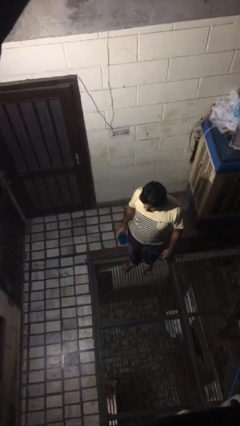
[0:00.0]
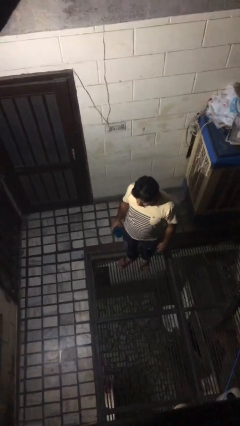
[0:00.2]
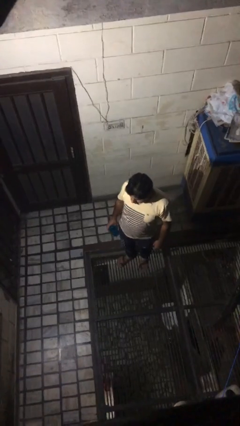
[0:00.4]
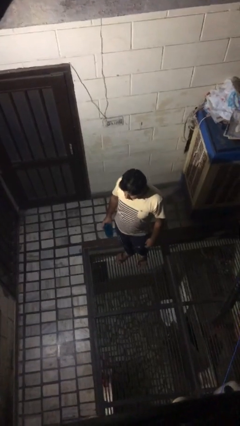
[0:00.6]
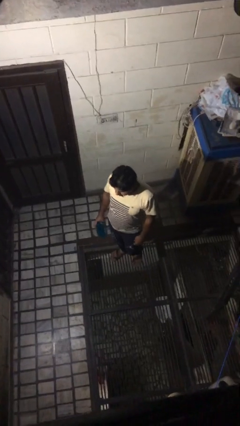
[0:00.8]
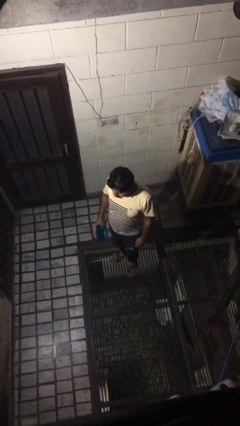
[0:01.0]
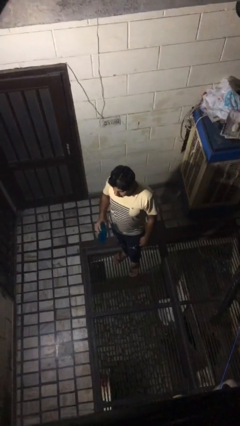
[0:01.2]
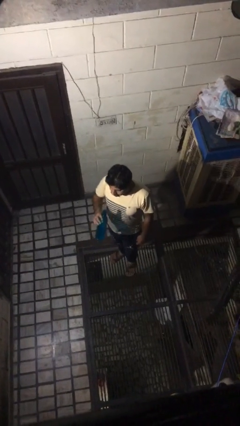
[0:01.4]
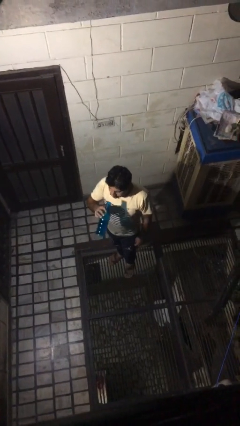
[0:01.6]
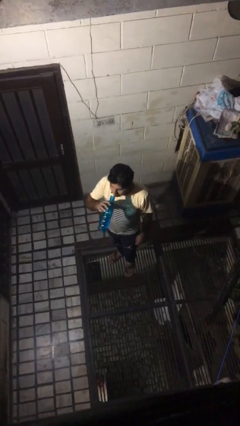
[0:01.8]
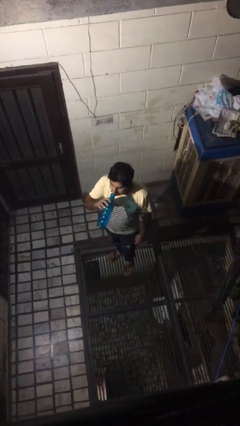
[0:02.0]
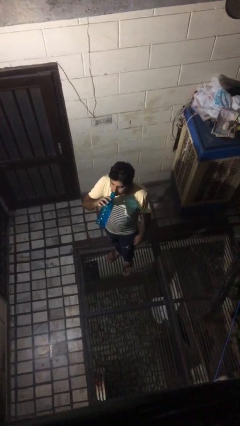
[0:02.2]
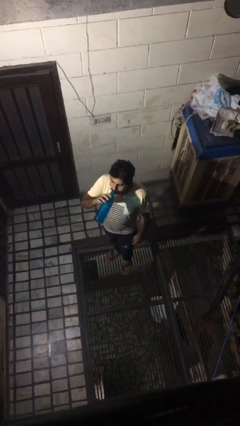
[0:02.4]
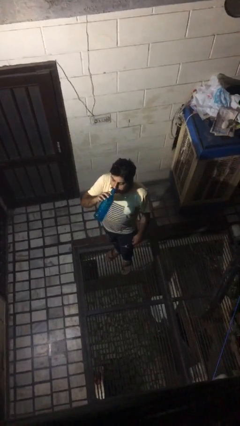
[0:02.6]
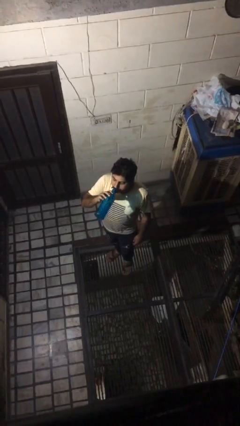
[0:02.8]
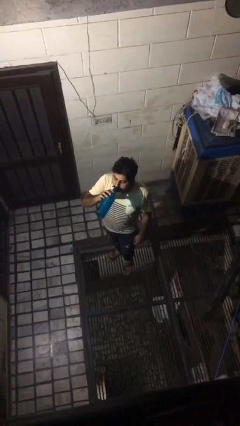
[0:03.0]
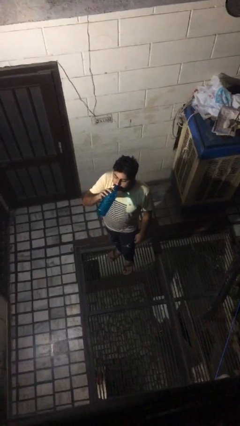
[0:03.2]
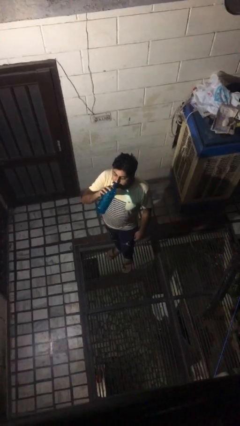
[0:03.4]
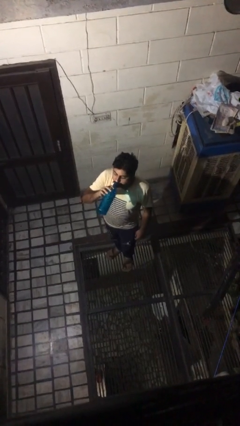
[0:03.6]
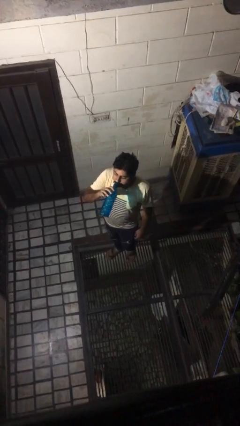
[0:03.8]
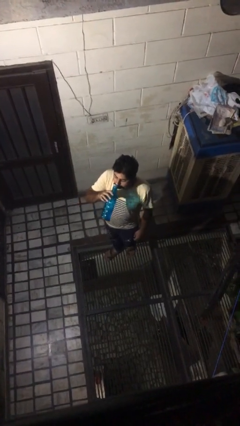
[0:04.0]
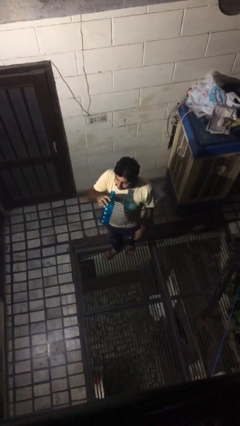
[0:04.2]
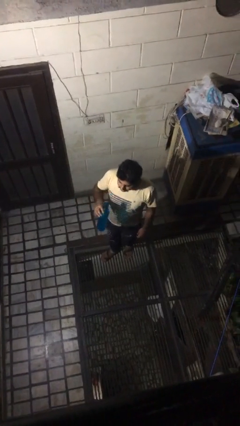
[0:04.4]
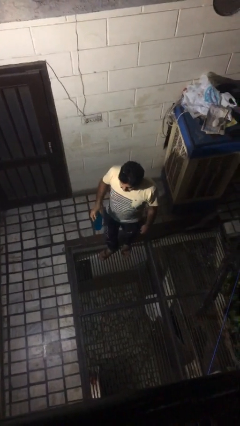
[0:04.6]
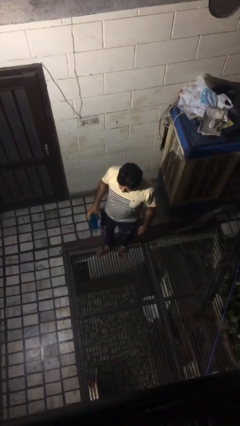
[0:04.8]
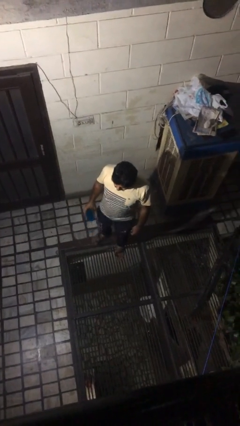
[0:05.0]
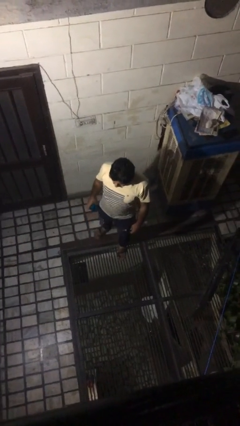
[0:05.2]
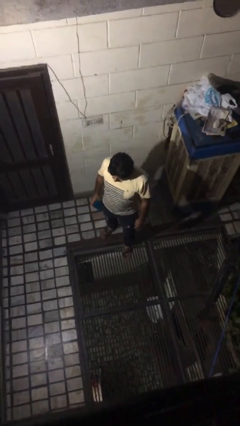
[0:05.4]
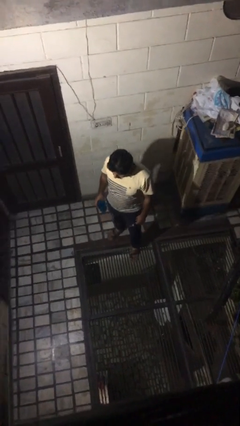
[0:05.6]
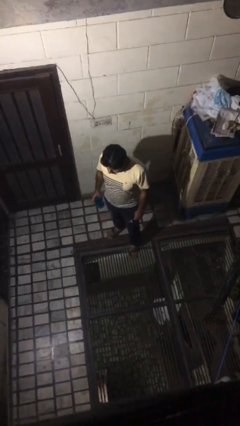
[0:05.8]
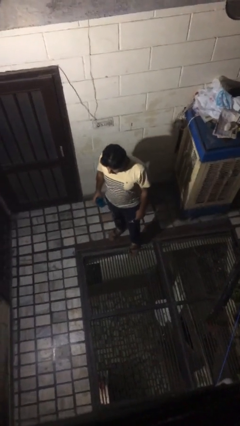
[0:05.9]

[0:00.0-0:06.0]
person drinks from bottle

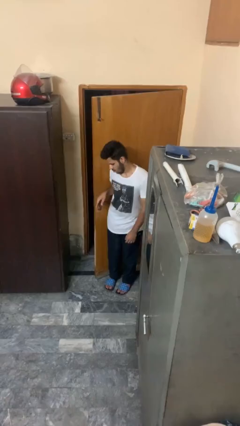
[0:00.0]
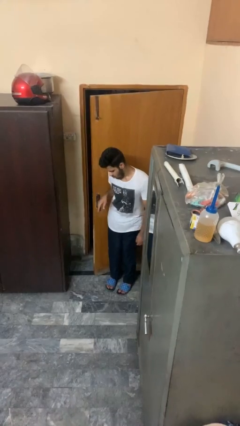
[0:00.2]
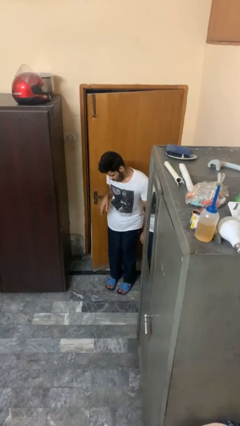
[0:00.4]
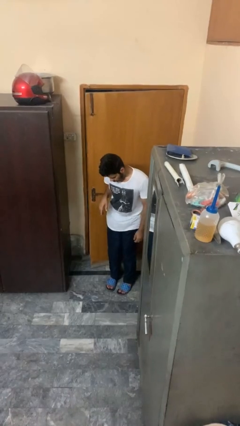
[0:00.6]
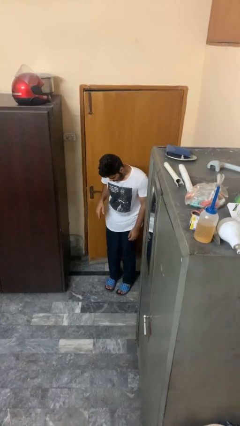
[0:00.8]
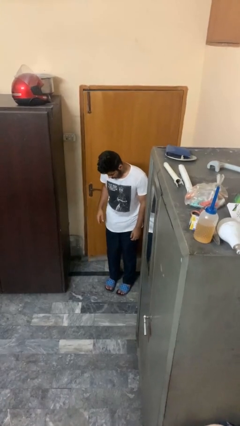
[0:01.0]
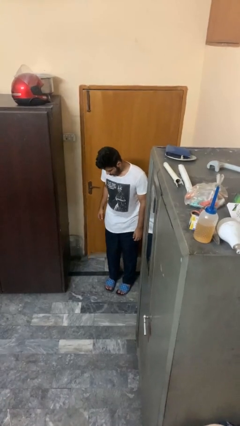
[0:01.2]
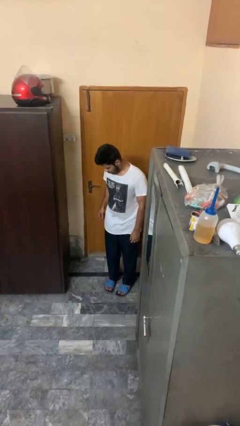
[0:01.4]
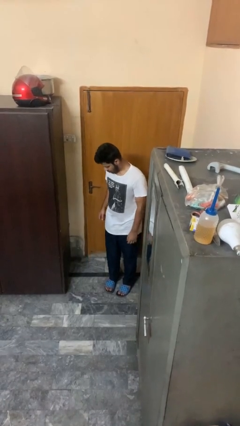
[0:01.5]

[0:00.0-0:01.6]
person closes door with hip

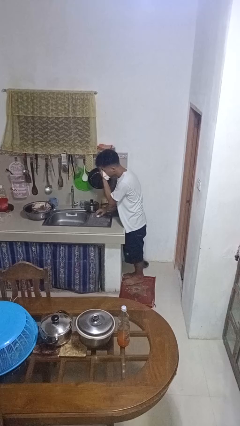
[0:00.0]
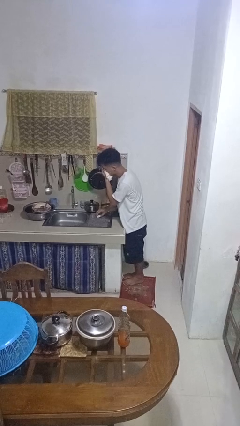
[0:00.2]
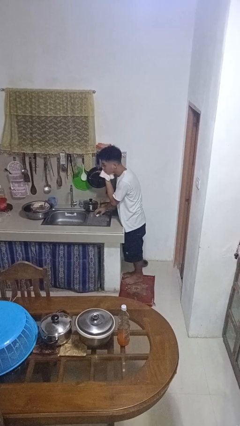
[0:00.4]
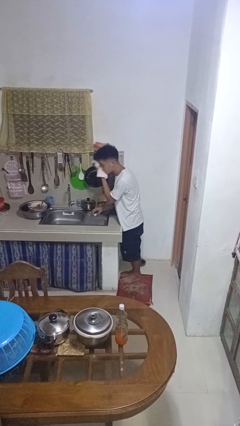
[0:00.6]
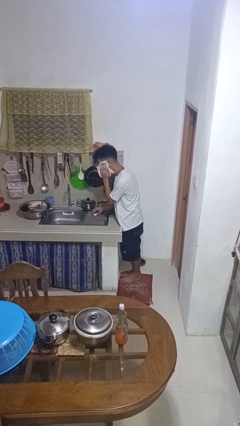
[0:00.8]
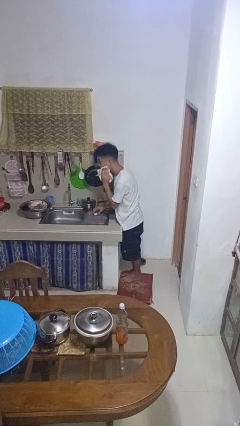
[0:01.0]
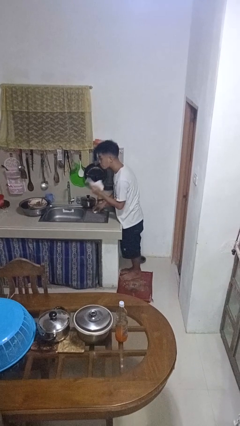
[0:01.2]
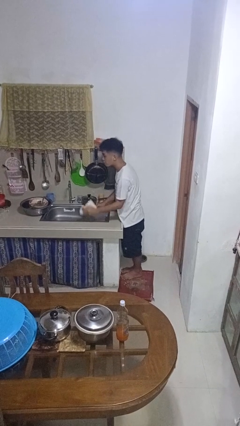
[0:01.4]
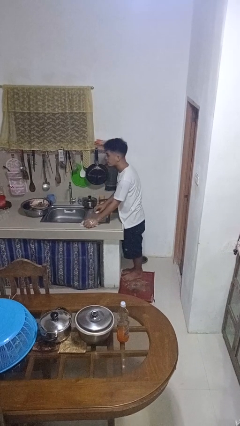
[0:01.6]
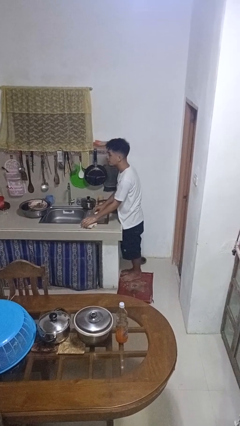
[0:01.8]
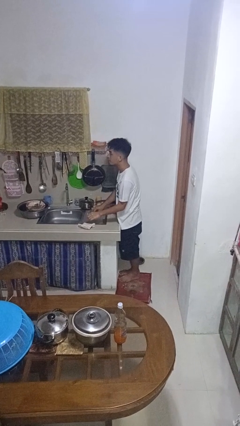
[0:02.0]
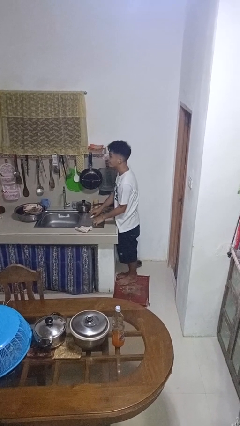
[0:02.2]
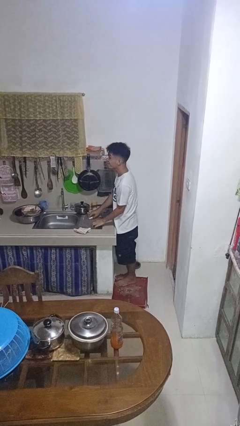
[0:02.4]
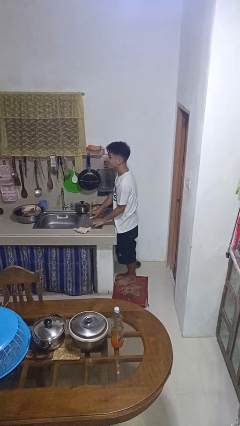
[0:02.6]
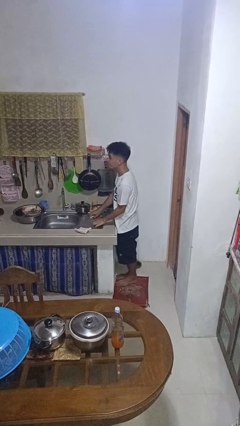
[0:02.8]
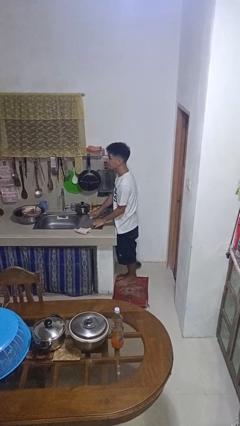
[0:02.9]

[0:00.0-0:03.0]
person dries face with towel

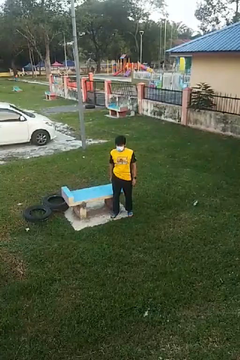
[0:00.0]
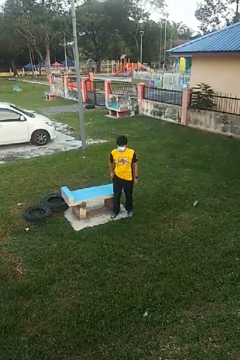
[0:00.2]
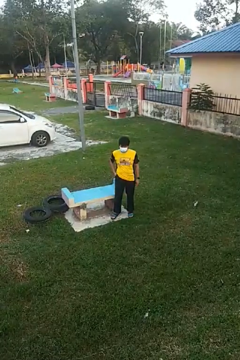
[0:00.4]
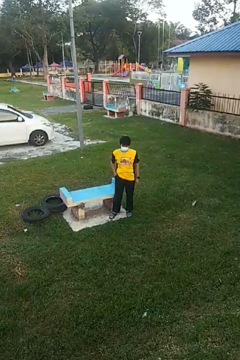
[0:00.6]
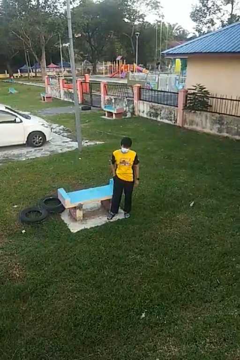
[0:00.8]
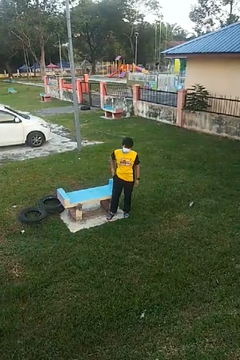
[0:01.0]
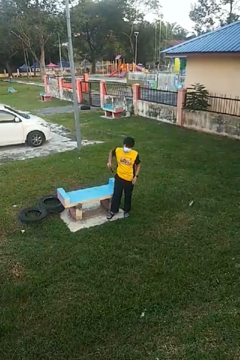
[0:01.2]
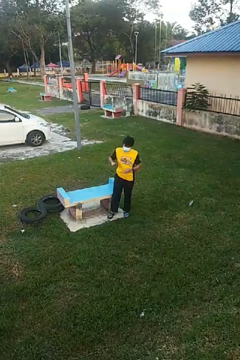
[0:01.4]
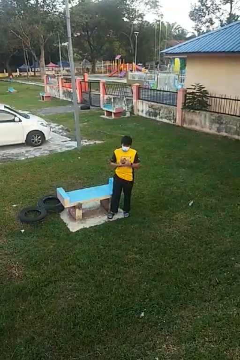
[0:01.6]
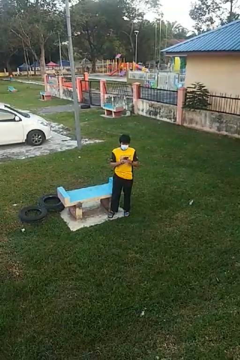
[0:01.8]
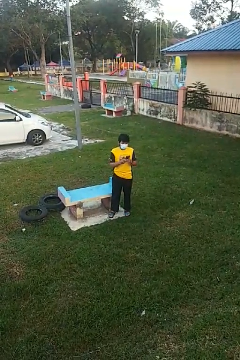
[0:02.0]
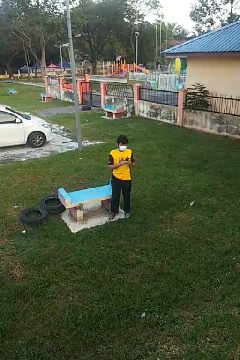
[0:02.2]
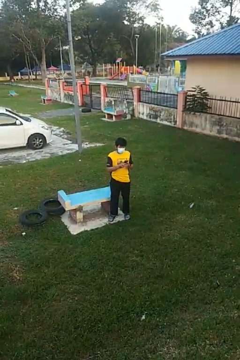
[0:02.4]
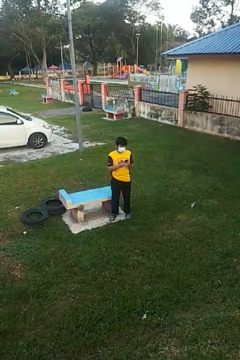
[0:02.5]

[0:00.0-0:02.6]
person takes phone from pocket

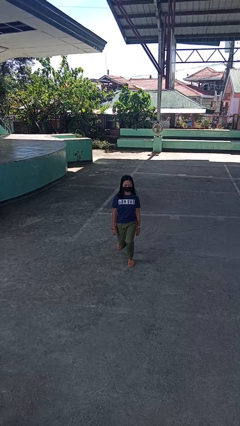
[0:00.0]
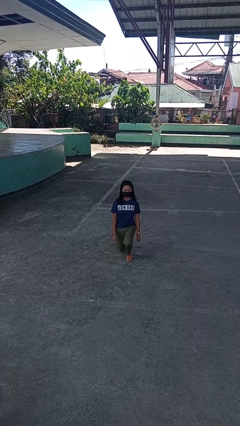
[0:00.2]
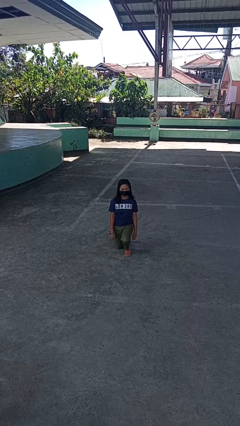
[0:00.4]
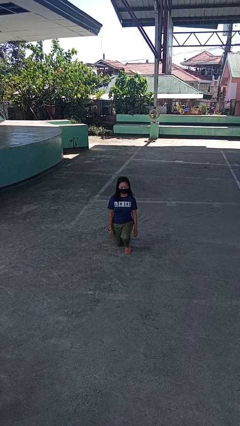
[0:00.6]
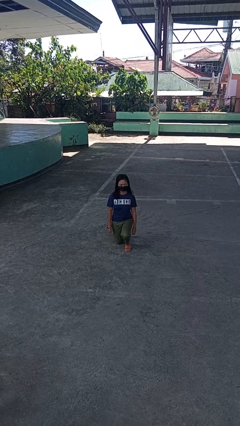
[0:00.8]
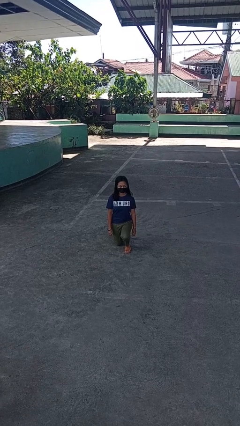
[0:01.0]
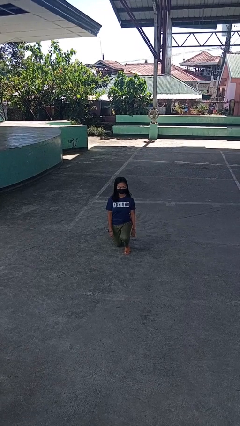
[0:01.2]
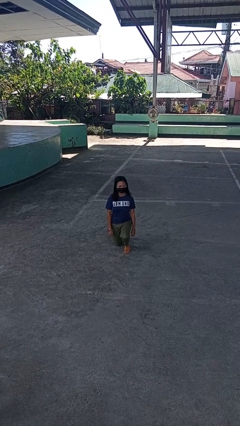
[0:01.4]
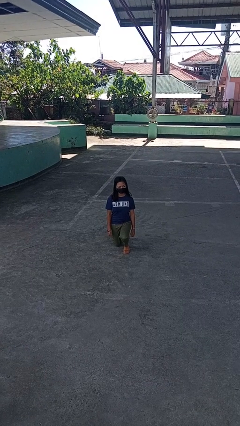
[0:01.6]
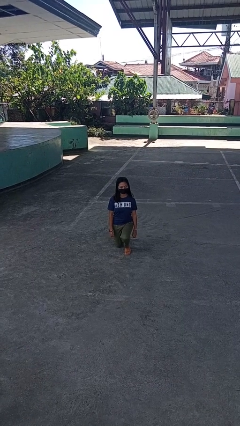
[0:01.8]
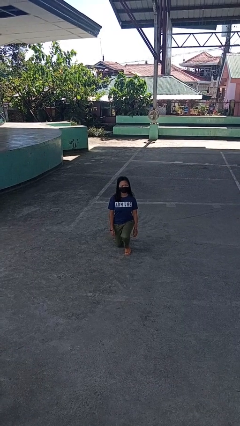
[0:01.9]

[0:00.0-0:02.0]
person kneels

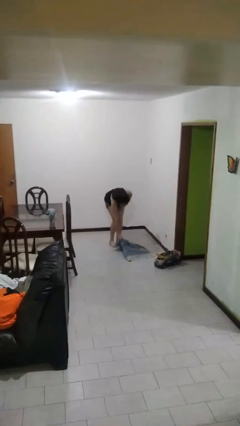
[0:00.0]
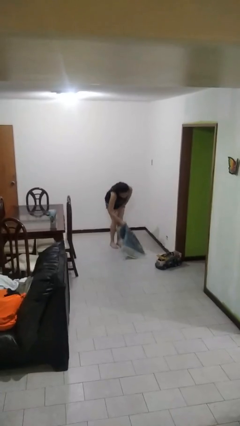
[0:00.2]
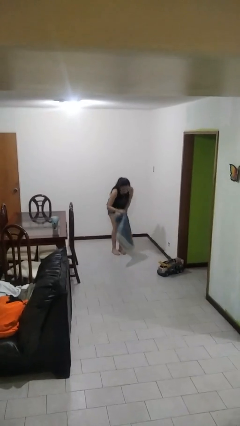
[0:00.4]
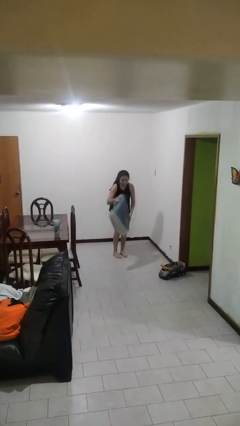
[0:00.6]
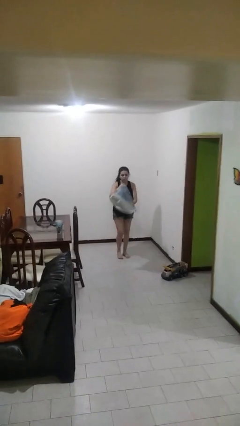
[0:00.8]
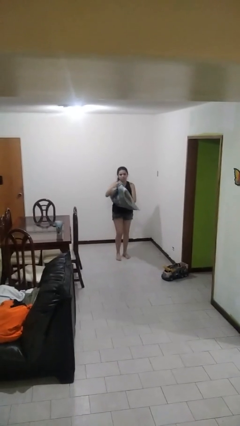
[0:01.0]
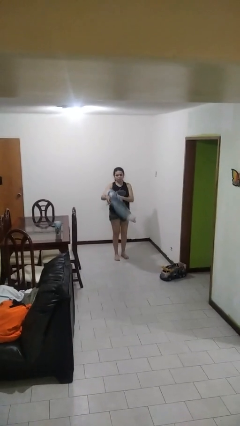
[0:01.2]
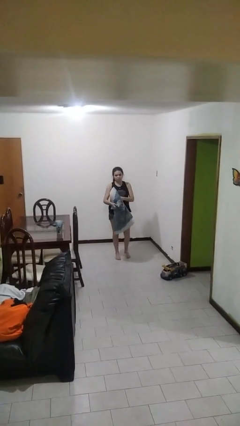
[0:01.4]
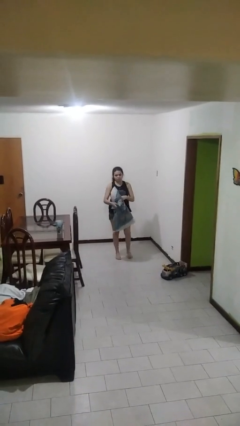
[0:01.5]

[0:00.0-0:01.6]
person picks up object from floor

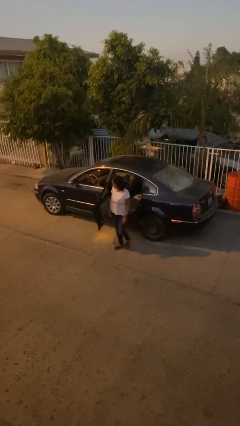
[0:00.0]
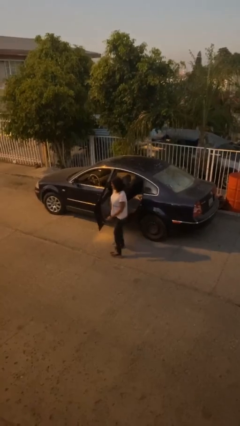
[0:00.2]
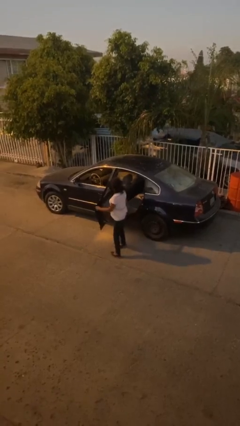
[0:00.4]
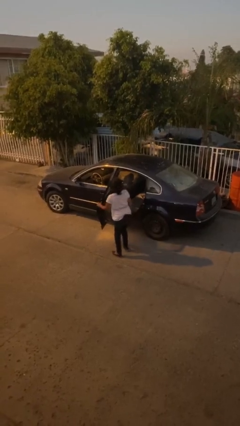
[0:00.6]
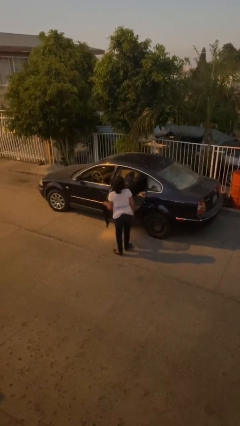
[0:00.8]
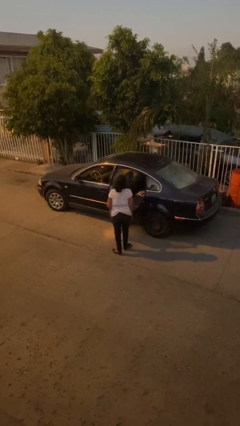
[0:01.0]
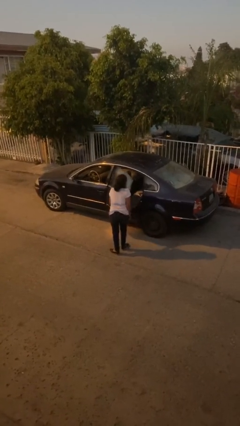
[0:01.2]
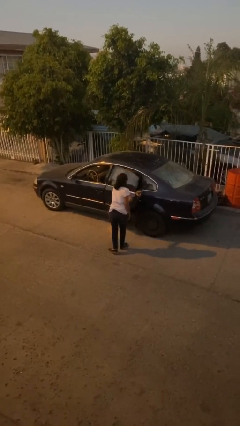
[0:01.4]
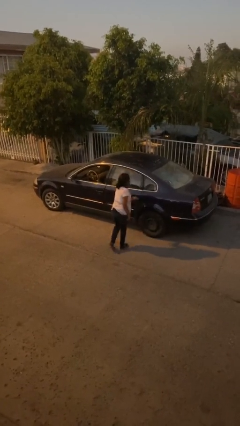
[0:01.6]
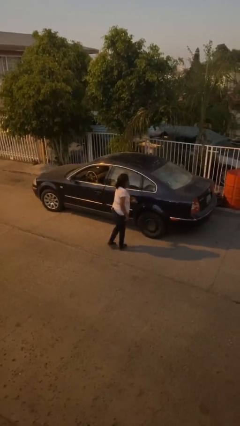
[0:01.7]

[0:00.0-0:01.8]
person closes car door
